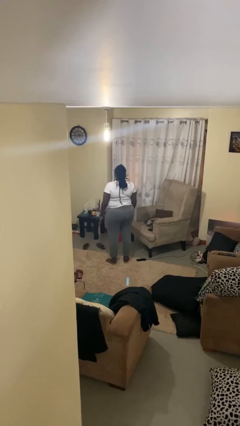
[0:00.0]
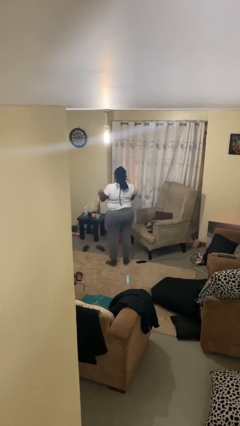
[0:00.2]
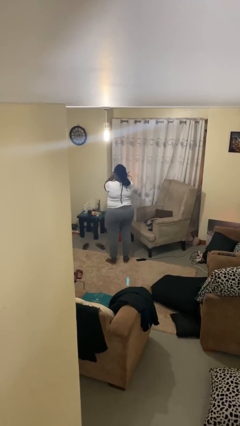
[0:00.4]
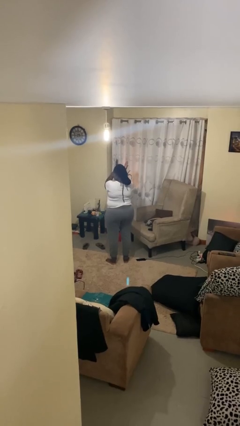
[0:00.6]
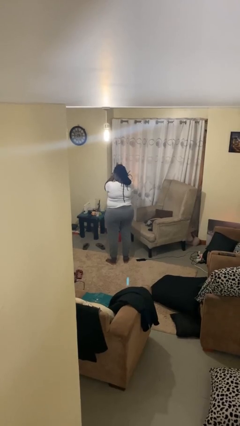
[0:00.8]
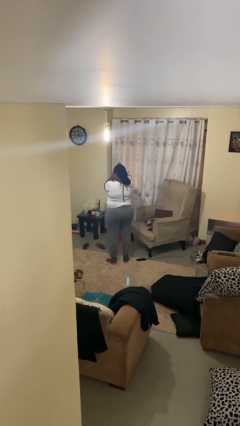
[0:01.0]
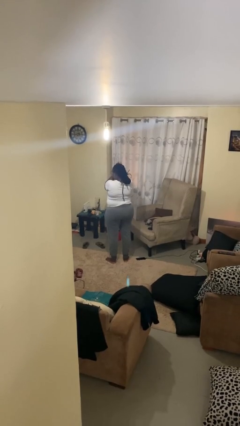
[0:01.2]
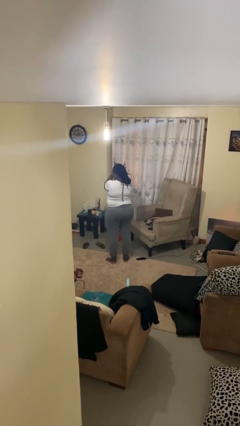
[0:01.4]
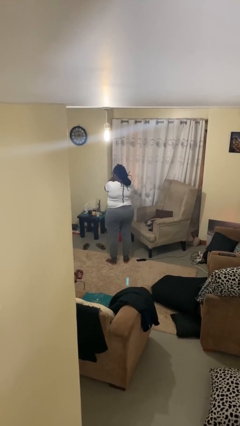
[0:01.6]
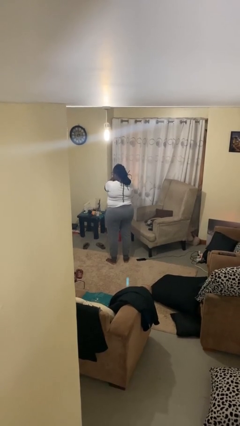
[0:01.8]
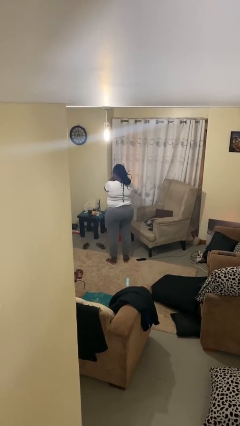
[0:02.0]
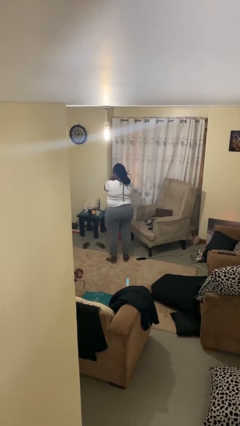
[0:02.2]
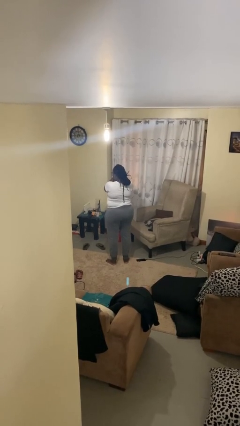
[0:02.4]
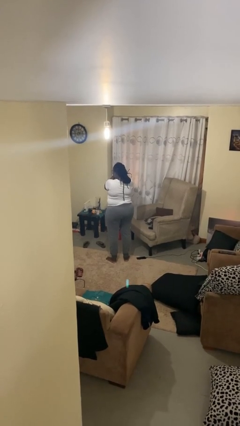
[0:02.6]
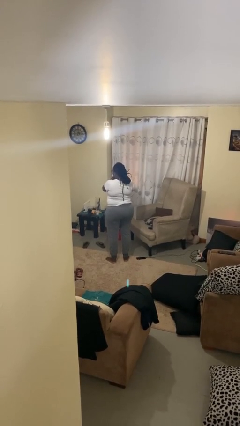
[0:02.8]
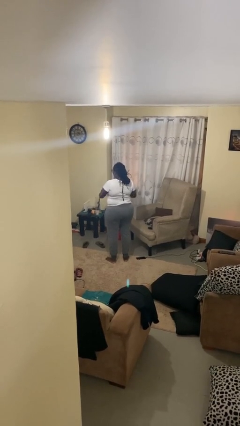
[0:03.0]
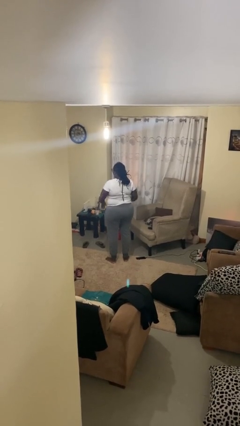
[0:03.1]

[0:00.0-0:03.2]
person claps hands

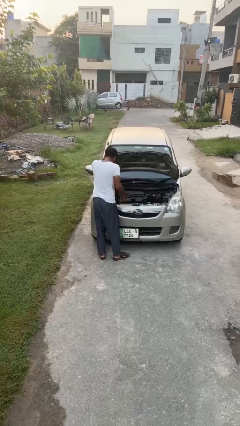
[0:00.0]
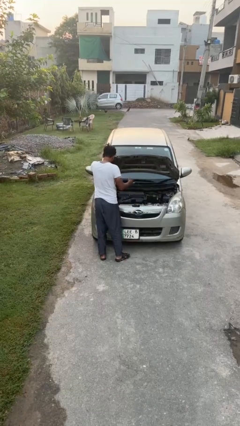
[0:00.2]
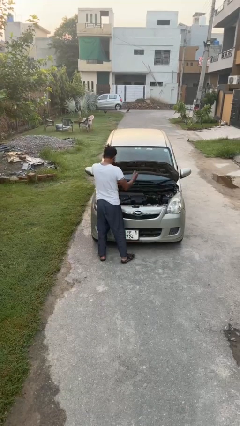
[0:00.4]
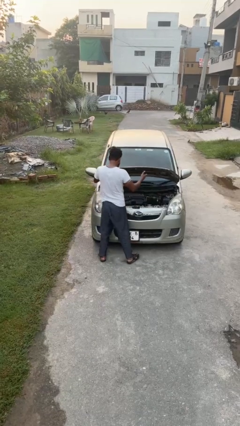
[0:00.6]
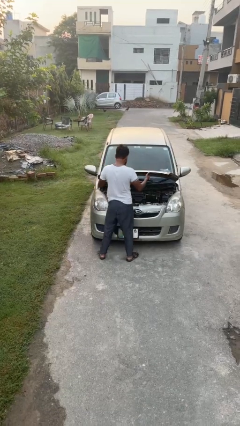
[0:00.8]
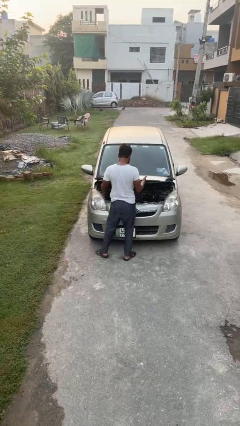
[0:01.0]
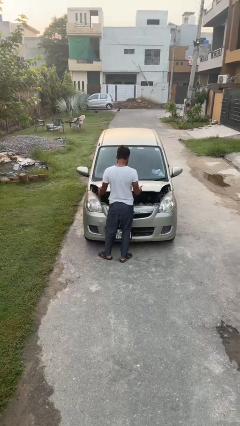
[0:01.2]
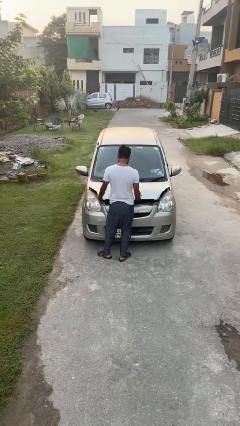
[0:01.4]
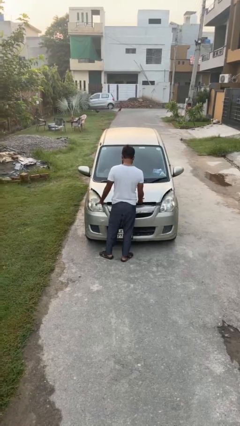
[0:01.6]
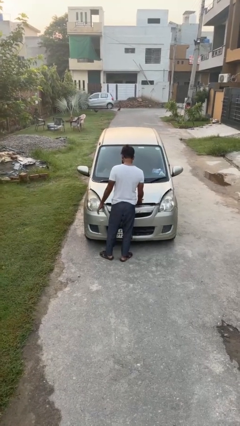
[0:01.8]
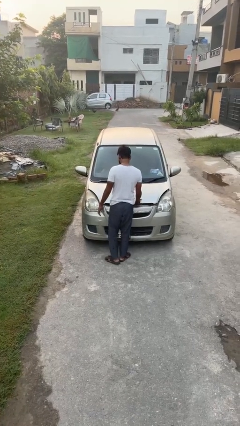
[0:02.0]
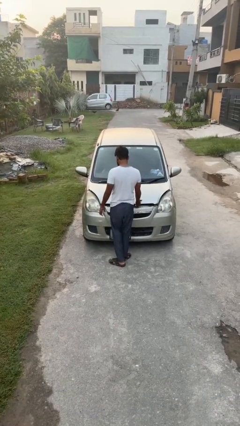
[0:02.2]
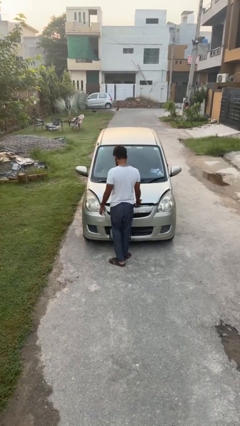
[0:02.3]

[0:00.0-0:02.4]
person closes car hood

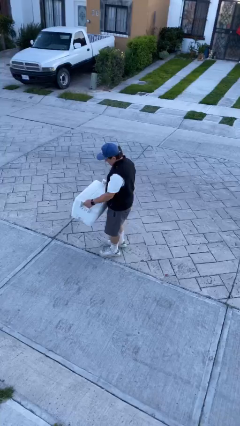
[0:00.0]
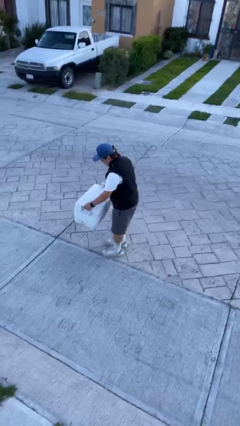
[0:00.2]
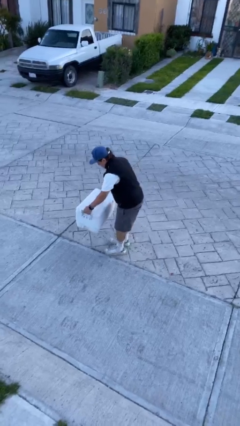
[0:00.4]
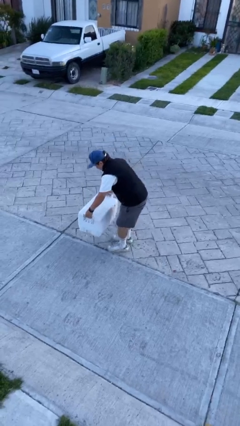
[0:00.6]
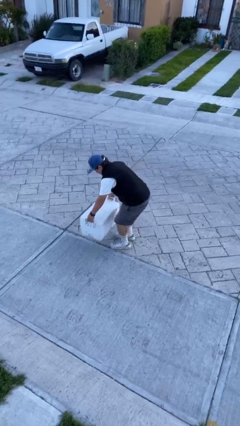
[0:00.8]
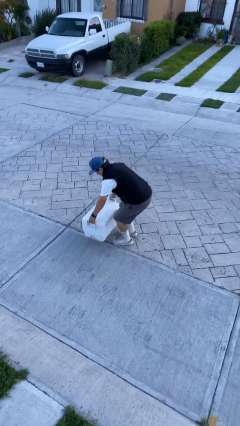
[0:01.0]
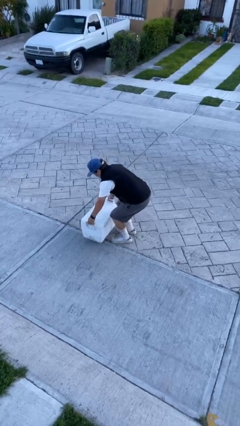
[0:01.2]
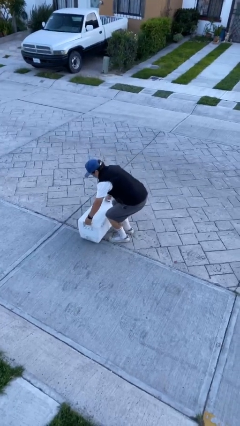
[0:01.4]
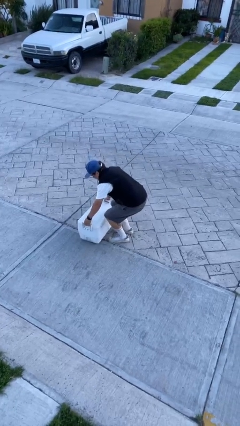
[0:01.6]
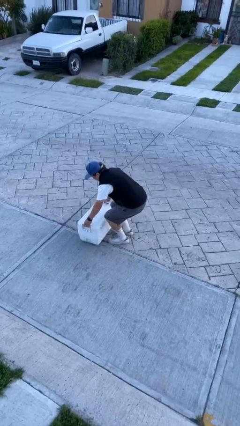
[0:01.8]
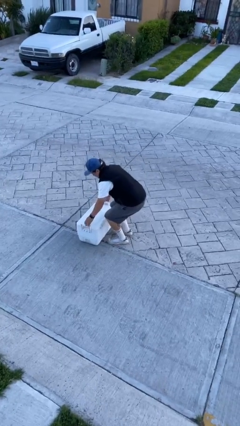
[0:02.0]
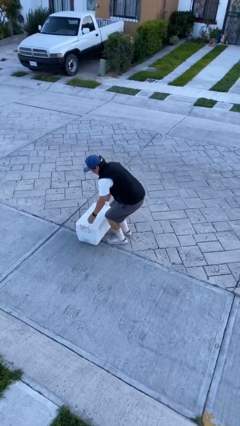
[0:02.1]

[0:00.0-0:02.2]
person puts down object on floor

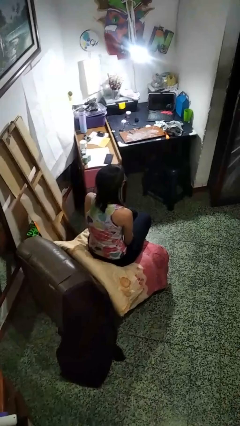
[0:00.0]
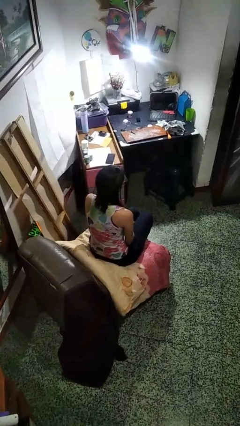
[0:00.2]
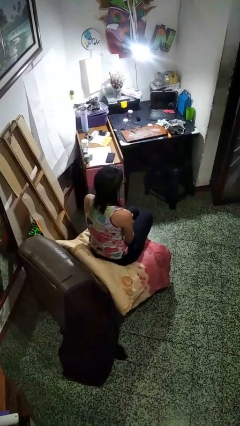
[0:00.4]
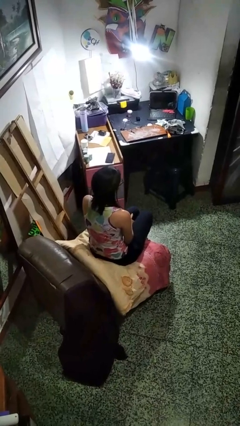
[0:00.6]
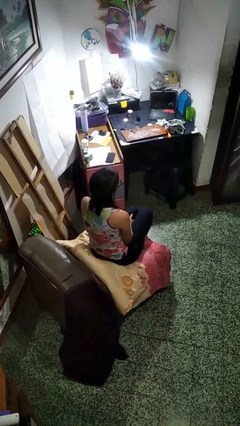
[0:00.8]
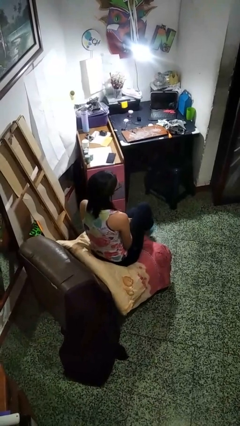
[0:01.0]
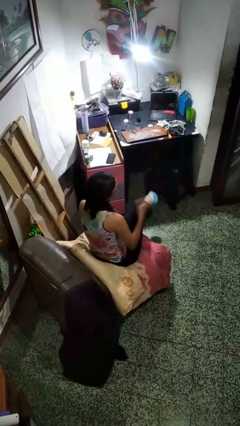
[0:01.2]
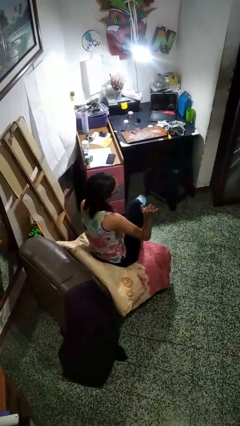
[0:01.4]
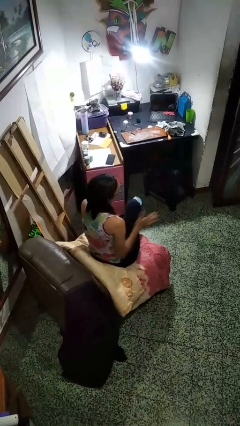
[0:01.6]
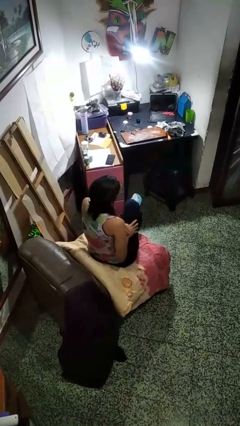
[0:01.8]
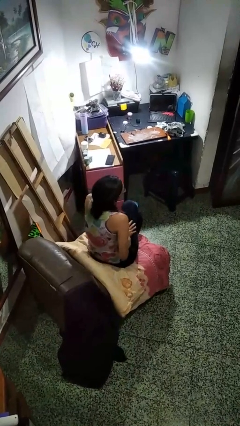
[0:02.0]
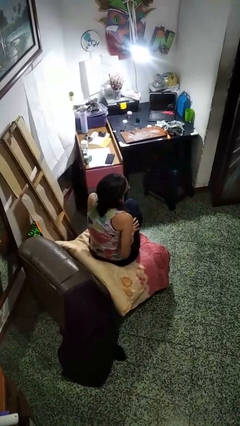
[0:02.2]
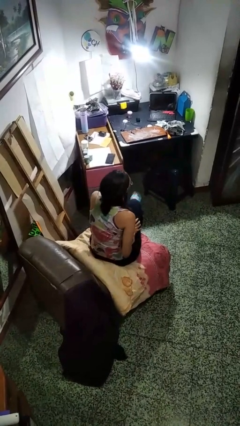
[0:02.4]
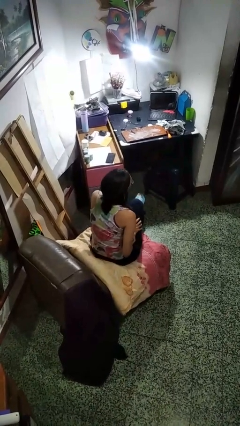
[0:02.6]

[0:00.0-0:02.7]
person slaps hands on thighs

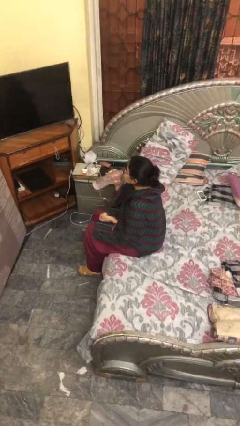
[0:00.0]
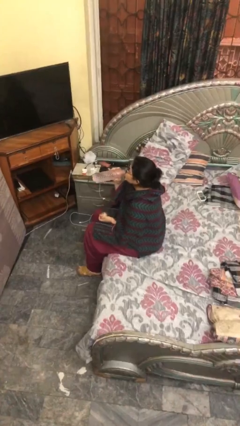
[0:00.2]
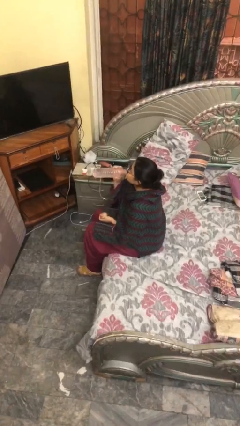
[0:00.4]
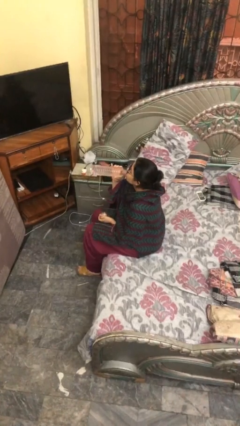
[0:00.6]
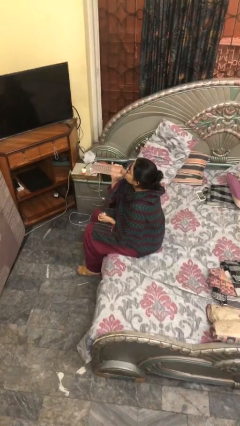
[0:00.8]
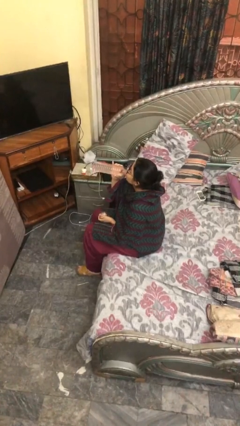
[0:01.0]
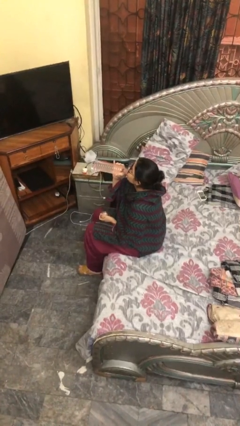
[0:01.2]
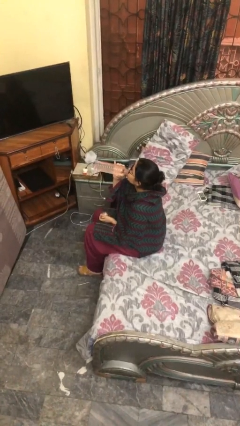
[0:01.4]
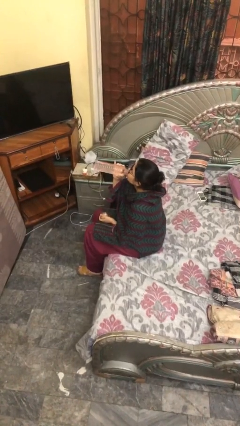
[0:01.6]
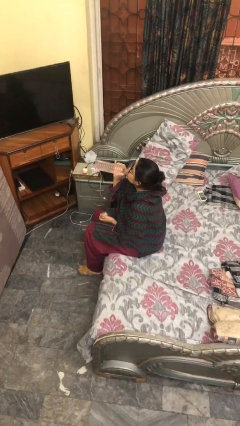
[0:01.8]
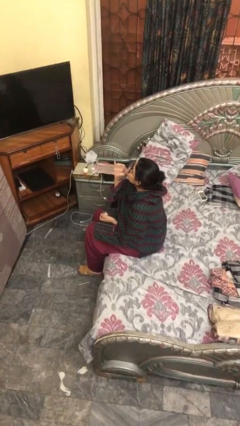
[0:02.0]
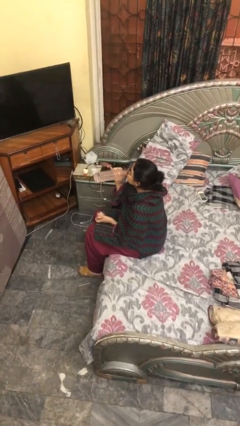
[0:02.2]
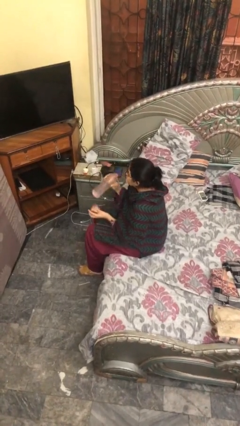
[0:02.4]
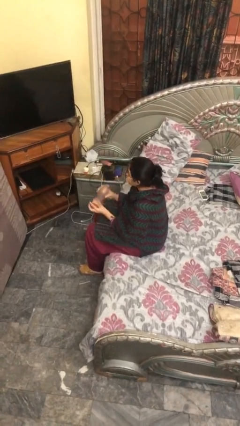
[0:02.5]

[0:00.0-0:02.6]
person drinks from bottle

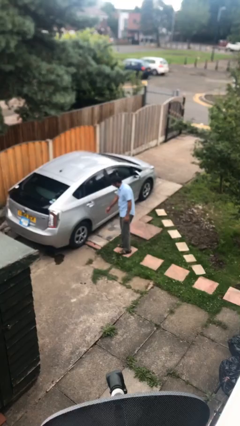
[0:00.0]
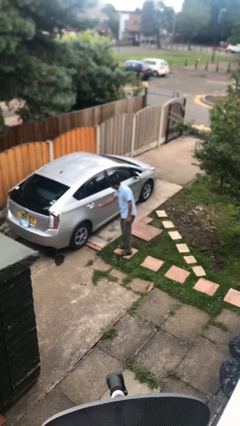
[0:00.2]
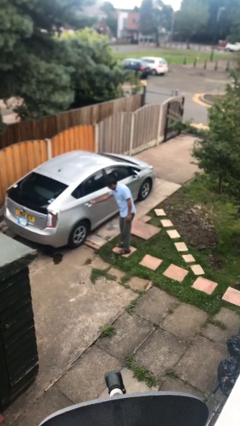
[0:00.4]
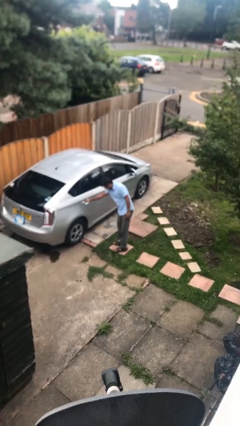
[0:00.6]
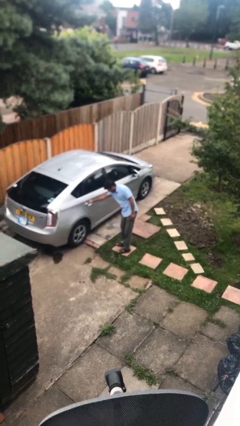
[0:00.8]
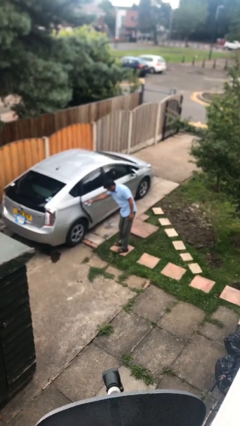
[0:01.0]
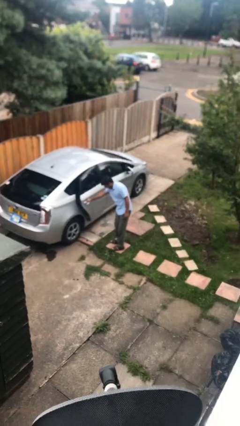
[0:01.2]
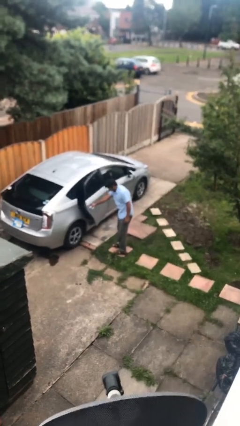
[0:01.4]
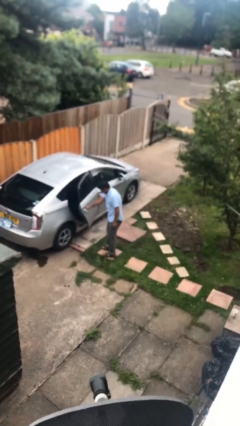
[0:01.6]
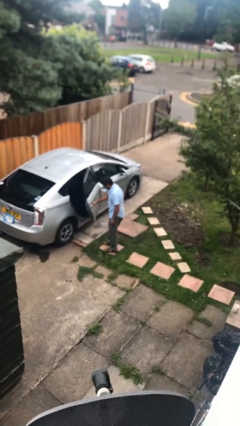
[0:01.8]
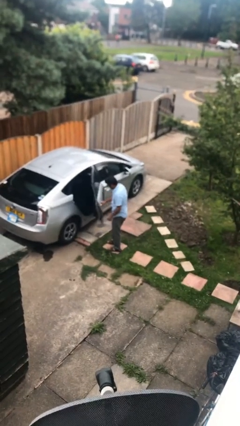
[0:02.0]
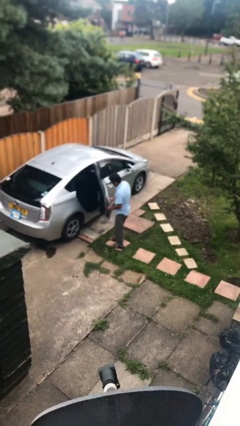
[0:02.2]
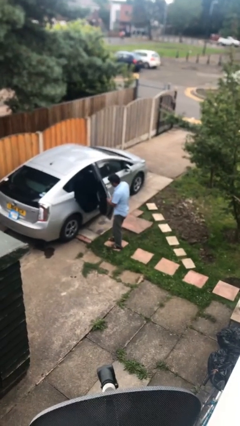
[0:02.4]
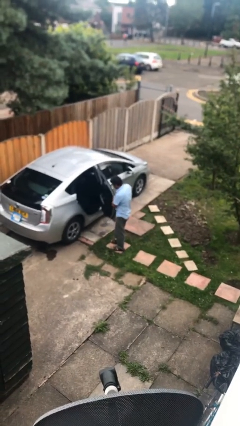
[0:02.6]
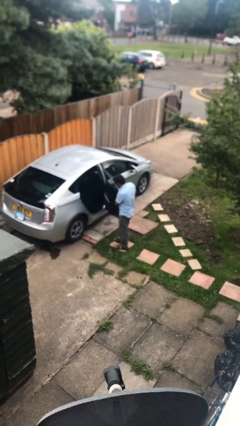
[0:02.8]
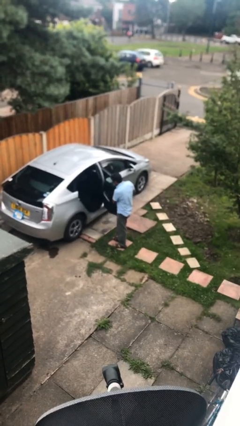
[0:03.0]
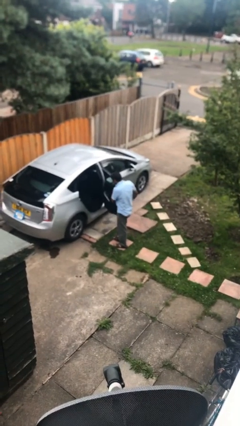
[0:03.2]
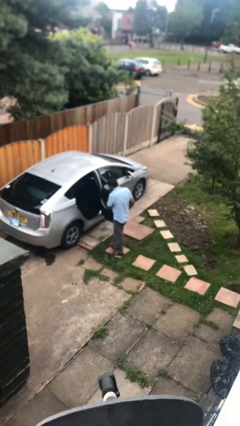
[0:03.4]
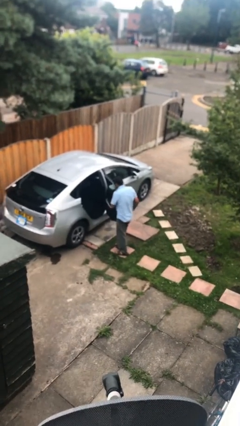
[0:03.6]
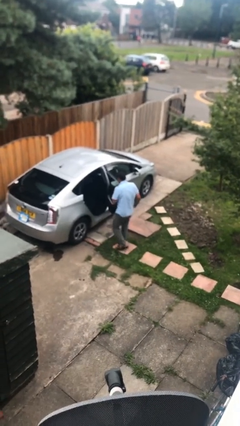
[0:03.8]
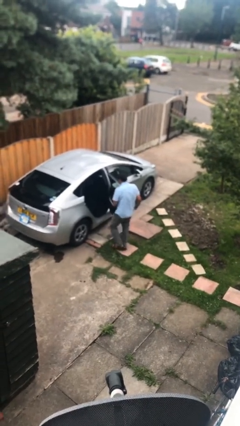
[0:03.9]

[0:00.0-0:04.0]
person opens car door
